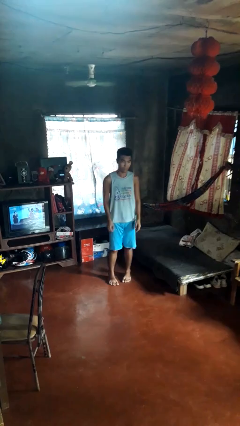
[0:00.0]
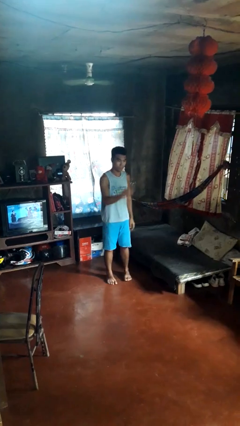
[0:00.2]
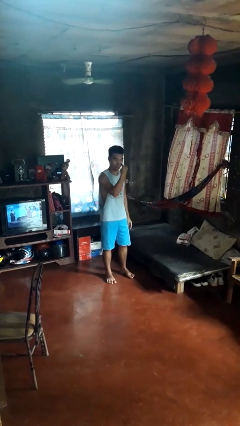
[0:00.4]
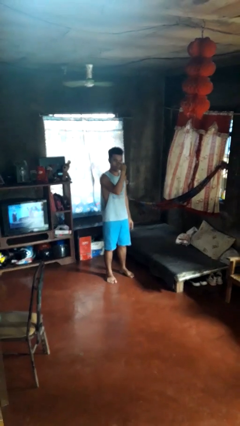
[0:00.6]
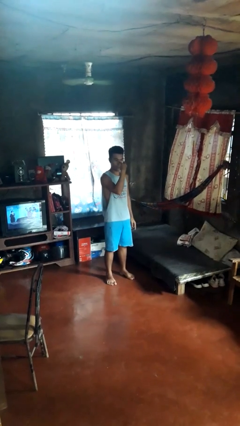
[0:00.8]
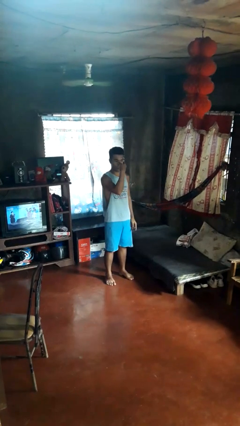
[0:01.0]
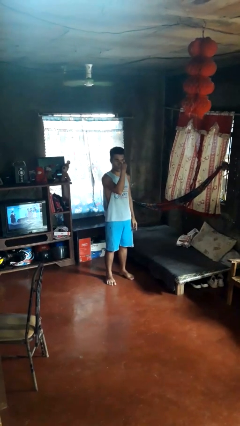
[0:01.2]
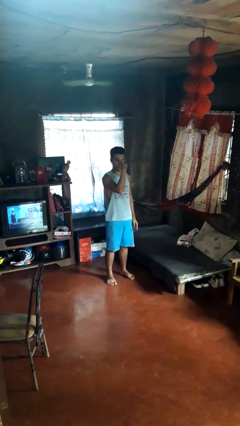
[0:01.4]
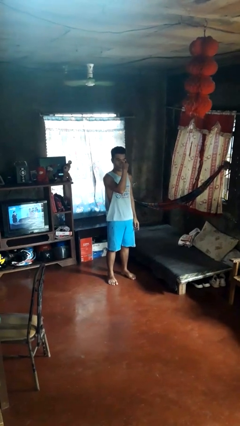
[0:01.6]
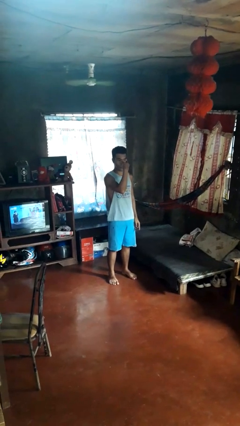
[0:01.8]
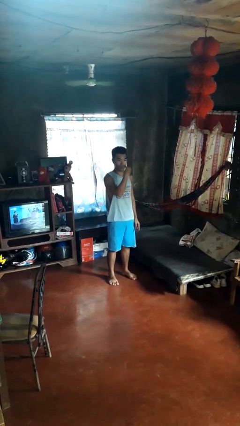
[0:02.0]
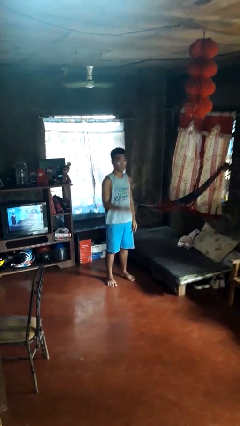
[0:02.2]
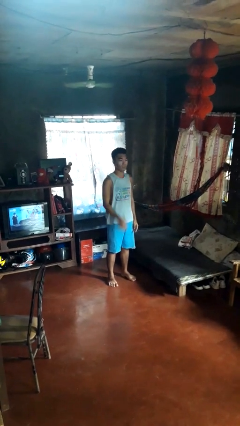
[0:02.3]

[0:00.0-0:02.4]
person gestures watch closely

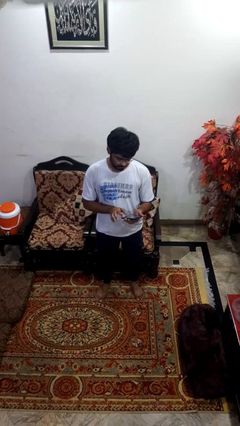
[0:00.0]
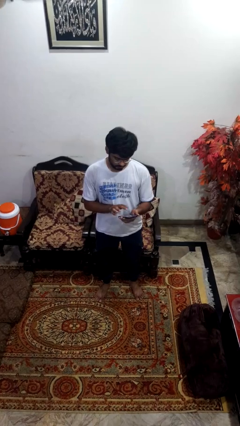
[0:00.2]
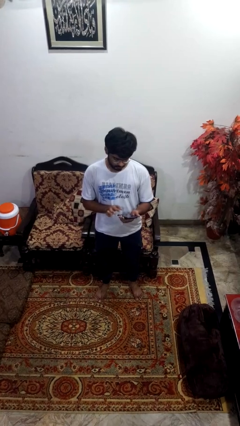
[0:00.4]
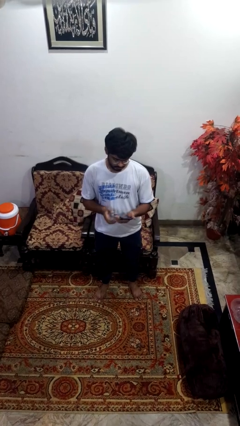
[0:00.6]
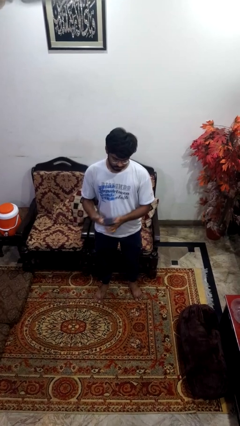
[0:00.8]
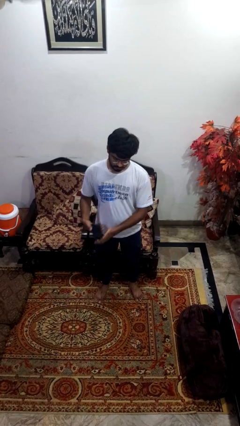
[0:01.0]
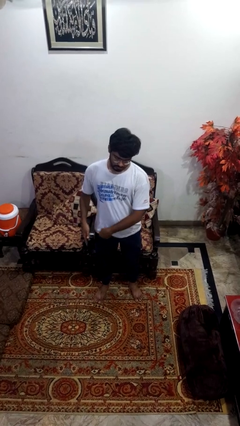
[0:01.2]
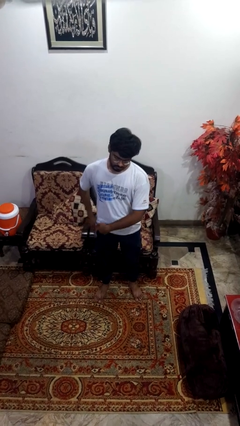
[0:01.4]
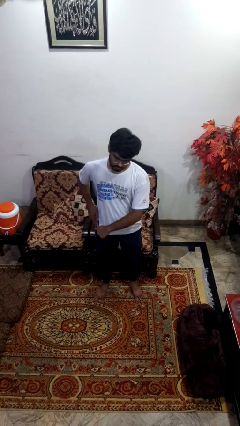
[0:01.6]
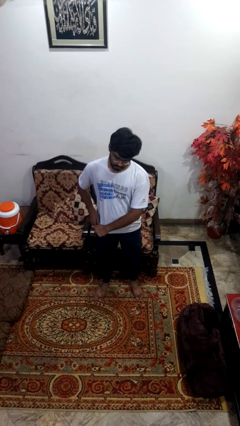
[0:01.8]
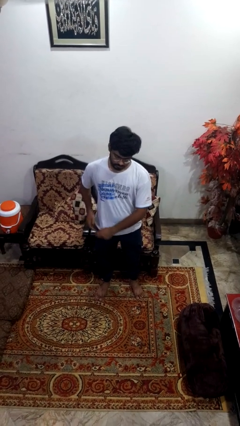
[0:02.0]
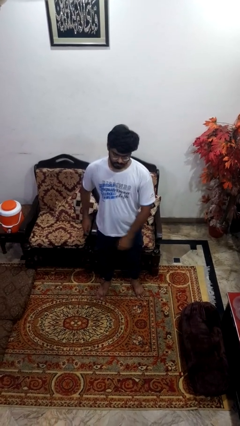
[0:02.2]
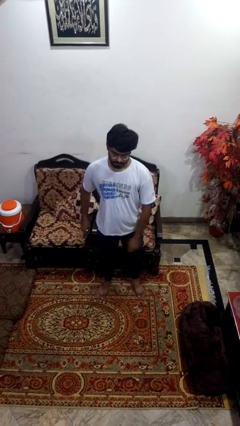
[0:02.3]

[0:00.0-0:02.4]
person puts phone into pocket

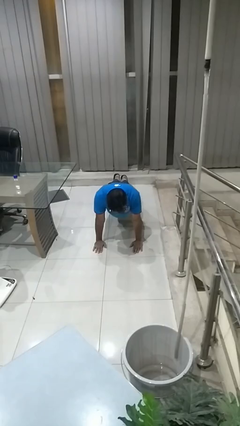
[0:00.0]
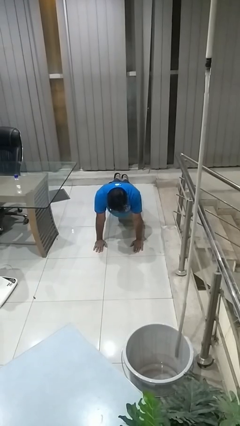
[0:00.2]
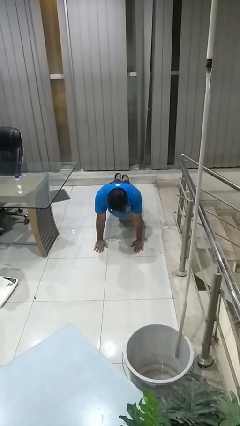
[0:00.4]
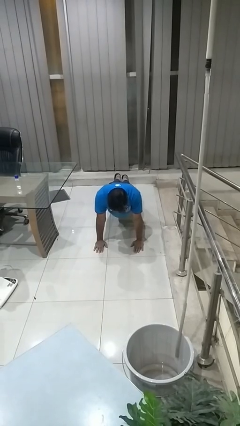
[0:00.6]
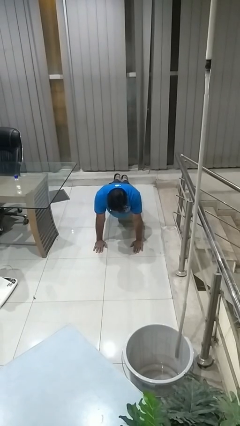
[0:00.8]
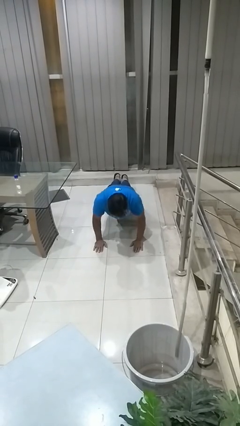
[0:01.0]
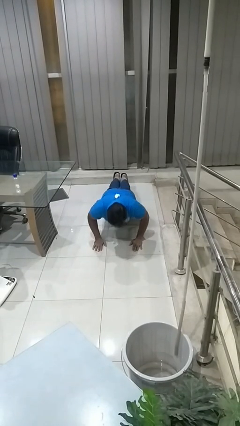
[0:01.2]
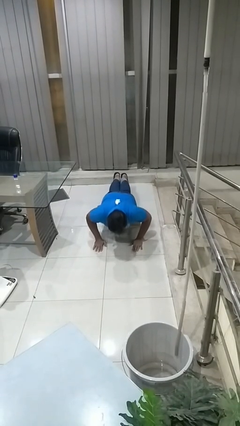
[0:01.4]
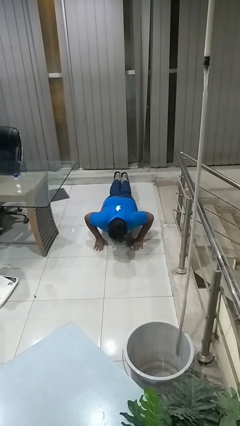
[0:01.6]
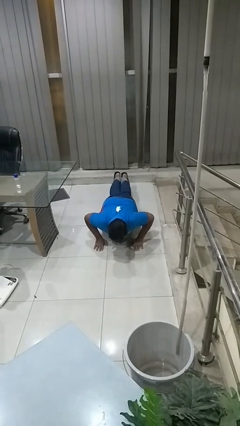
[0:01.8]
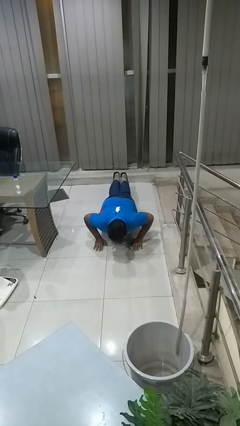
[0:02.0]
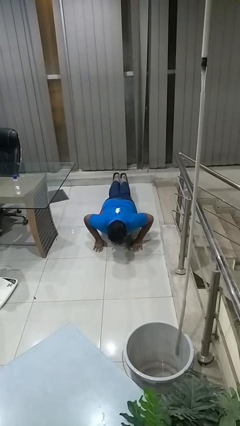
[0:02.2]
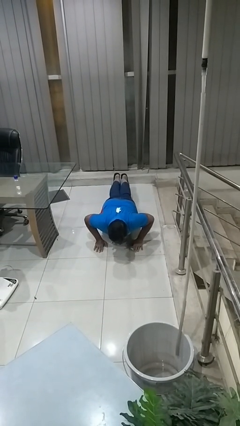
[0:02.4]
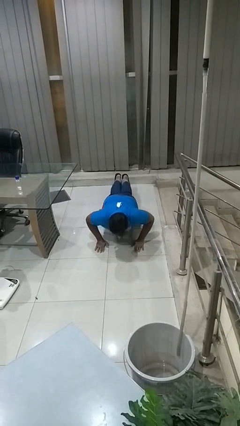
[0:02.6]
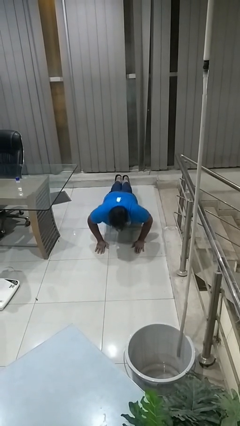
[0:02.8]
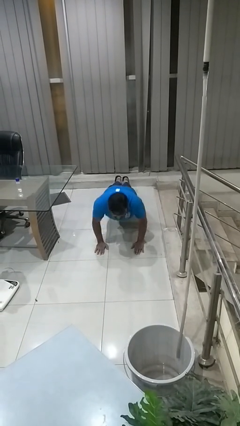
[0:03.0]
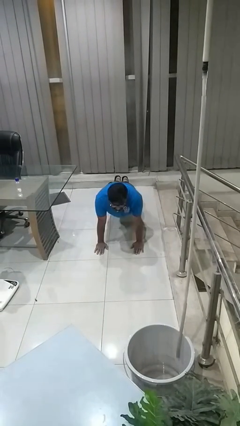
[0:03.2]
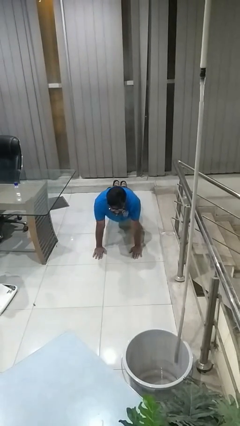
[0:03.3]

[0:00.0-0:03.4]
person exercises with pushup

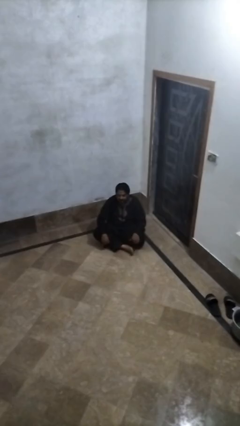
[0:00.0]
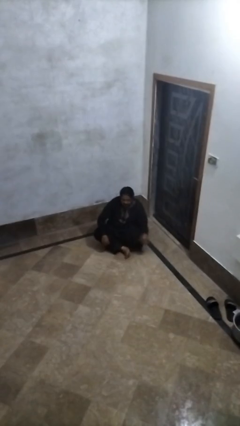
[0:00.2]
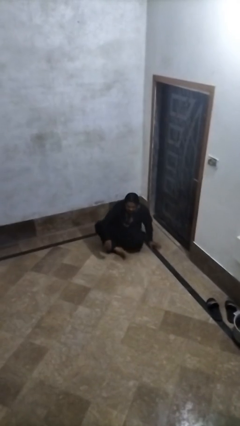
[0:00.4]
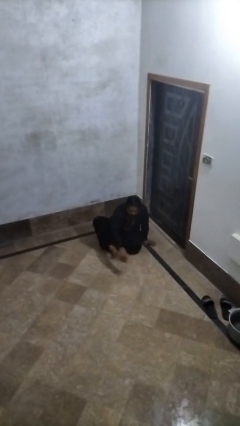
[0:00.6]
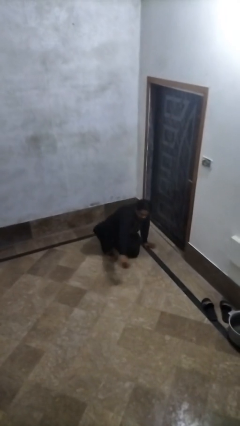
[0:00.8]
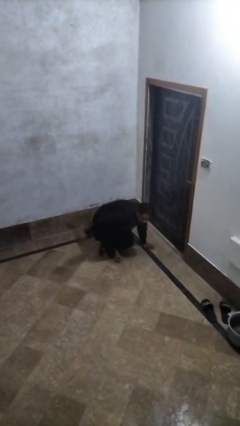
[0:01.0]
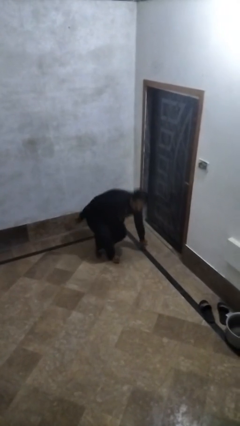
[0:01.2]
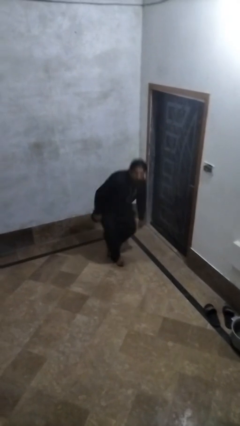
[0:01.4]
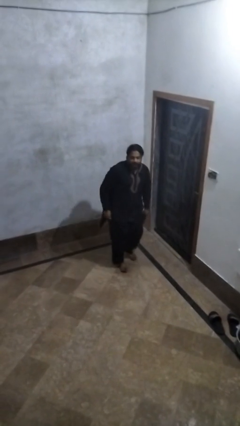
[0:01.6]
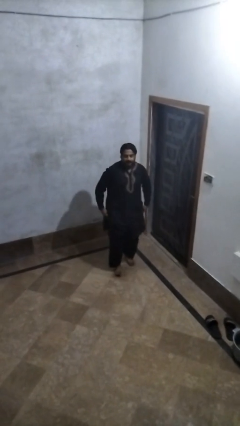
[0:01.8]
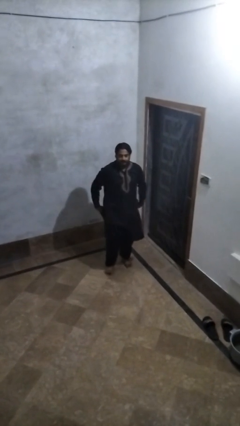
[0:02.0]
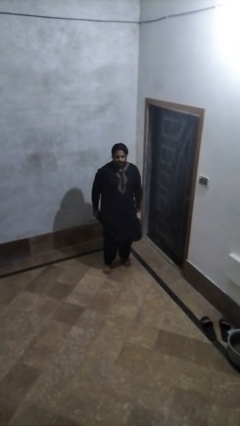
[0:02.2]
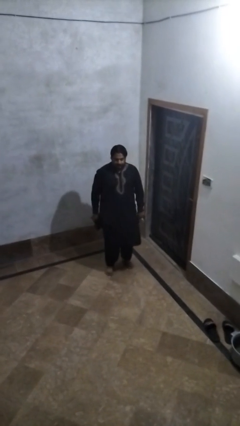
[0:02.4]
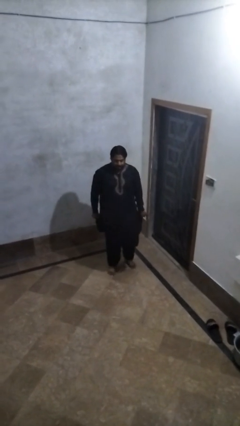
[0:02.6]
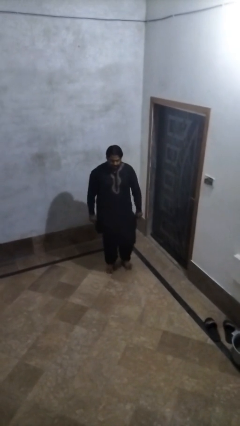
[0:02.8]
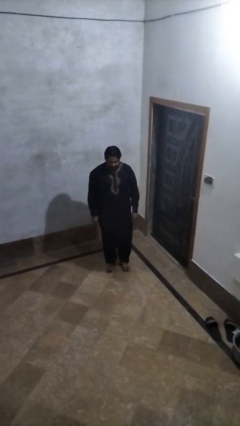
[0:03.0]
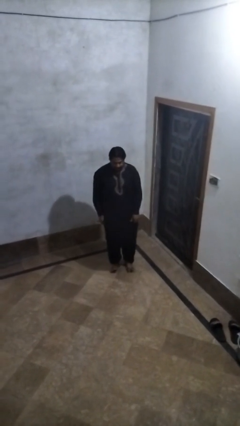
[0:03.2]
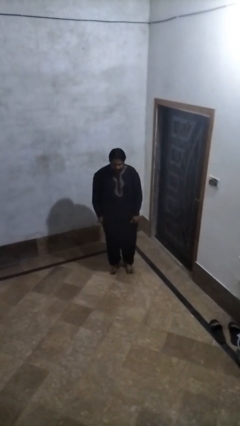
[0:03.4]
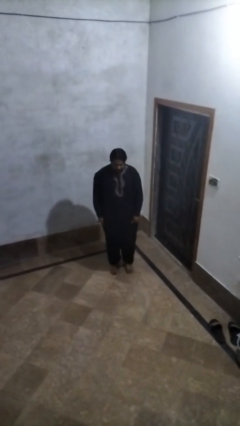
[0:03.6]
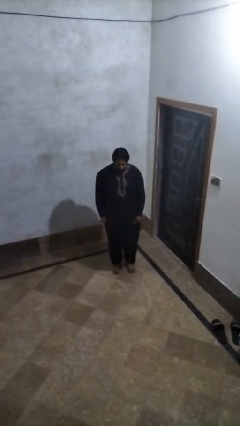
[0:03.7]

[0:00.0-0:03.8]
person stands up from floor

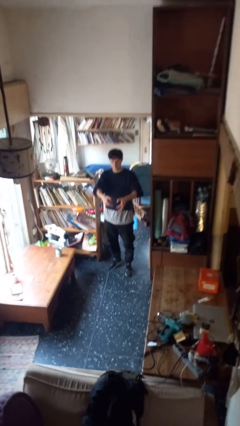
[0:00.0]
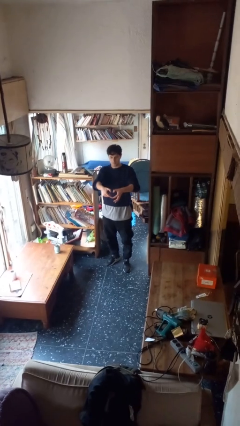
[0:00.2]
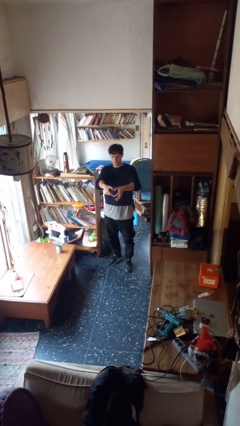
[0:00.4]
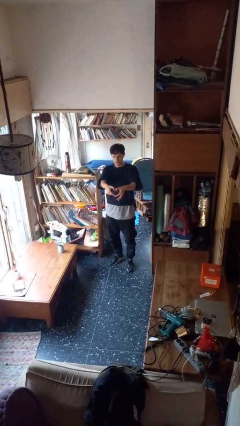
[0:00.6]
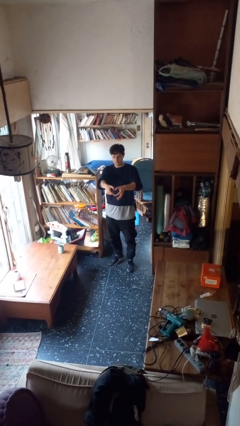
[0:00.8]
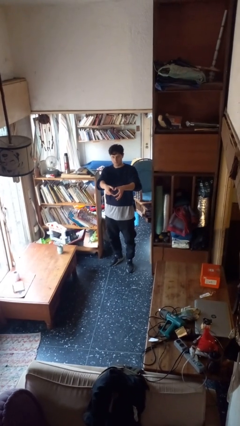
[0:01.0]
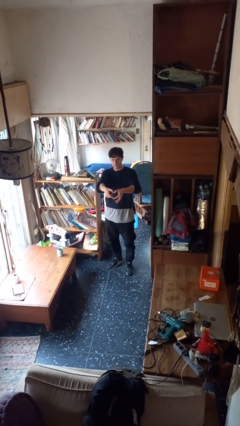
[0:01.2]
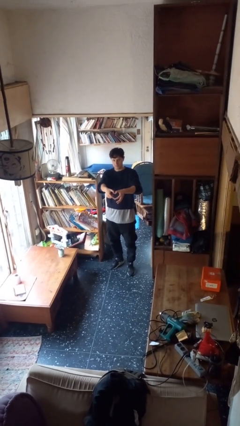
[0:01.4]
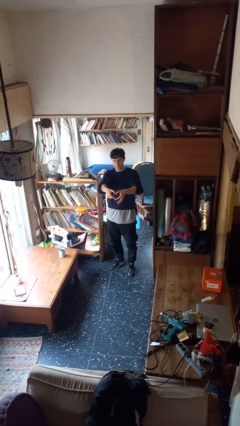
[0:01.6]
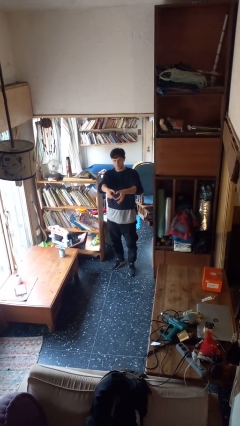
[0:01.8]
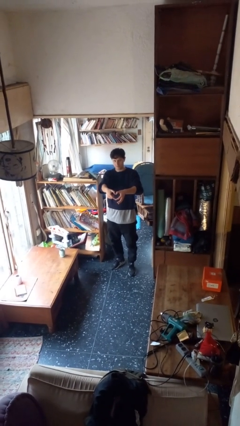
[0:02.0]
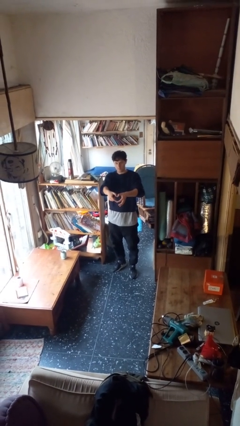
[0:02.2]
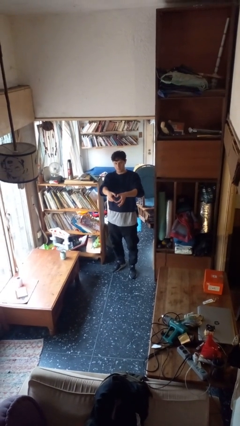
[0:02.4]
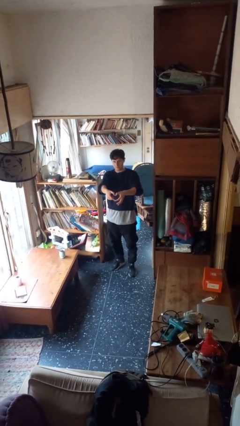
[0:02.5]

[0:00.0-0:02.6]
person gestures heart

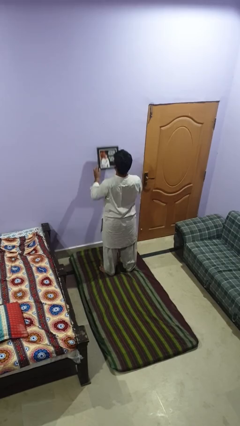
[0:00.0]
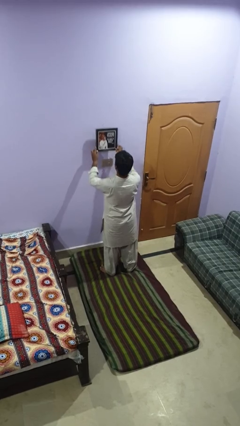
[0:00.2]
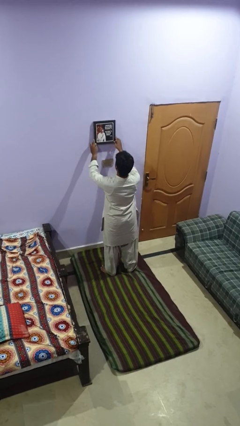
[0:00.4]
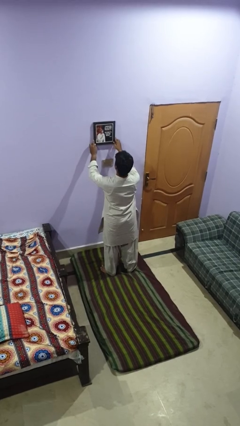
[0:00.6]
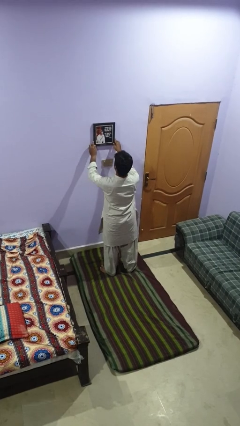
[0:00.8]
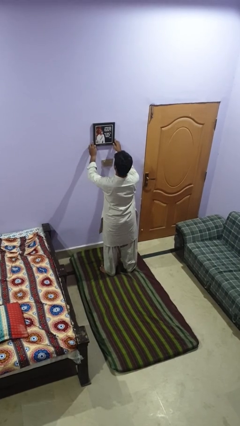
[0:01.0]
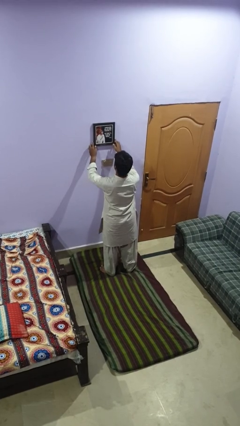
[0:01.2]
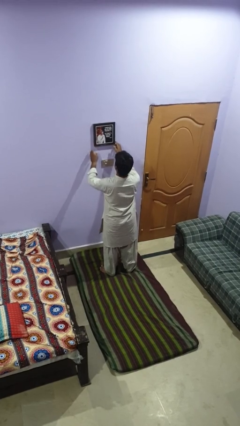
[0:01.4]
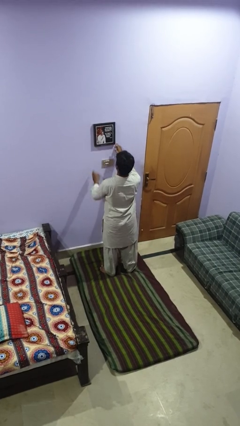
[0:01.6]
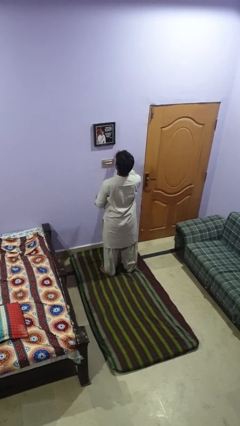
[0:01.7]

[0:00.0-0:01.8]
person puts up picture frame

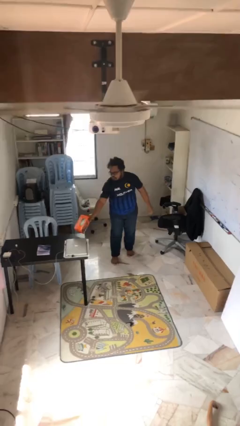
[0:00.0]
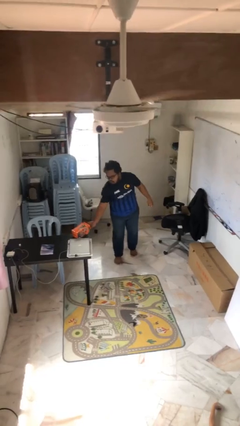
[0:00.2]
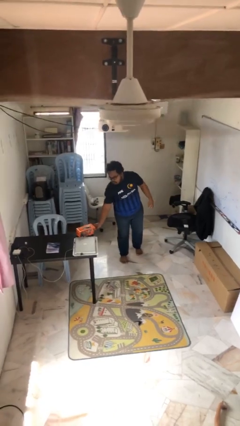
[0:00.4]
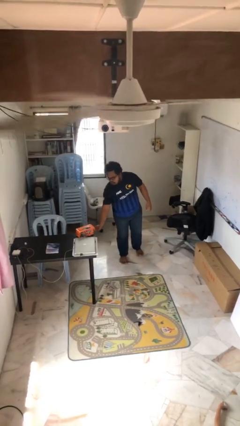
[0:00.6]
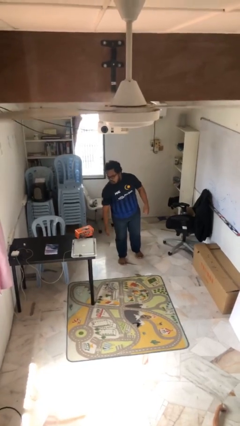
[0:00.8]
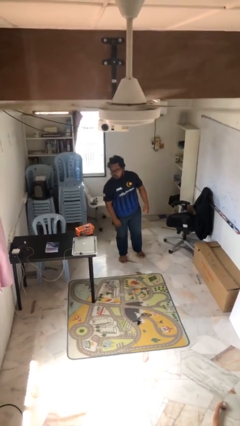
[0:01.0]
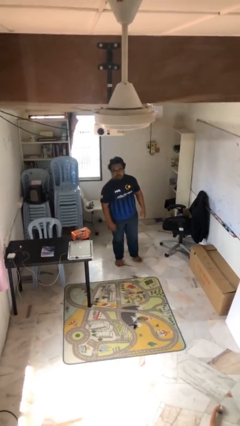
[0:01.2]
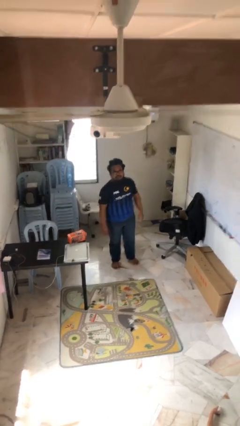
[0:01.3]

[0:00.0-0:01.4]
person puts down object on table
